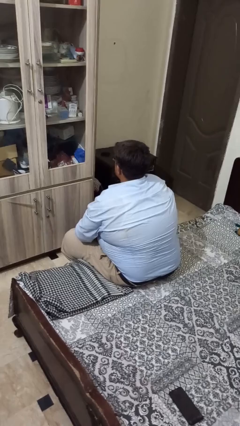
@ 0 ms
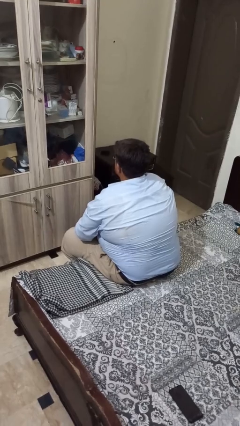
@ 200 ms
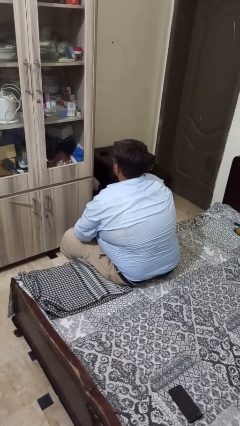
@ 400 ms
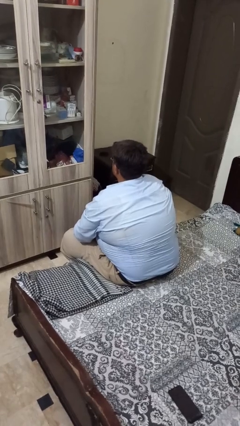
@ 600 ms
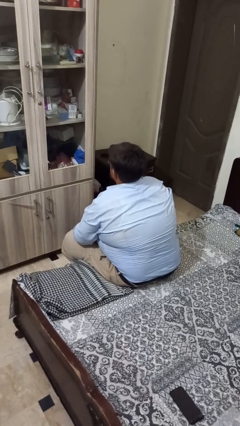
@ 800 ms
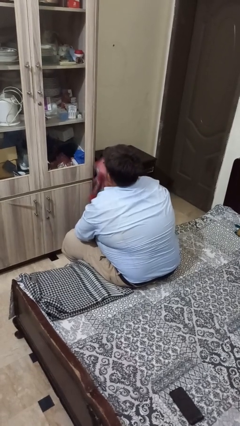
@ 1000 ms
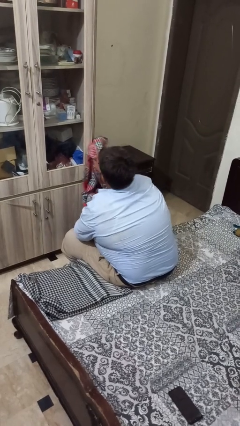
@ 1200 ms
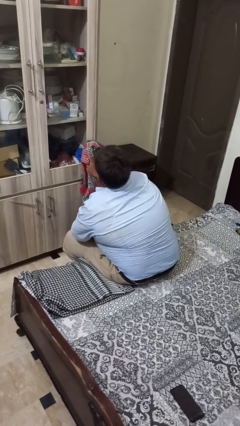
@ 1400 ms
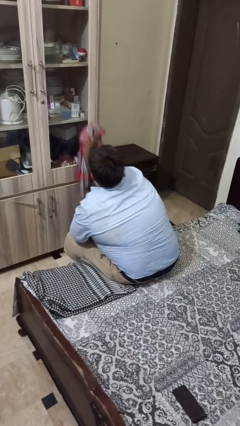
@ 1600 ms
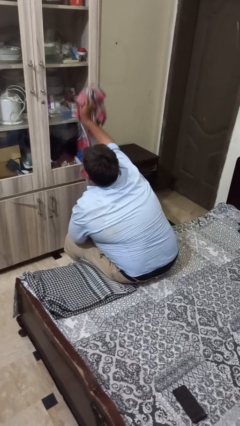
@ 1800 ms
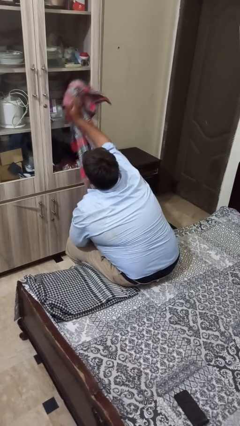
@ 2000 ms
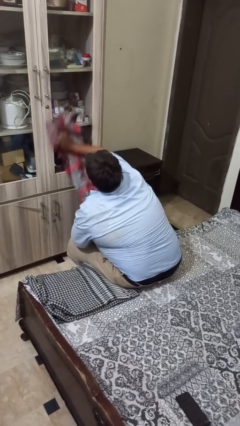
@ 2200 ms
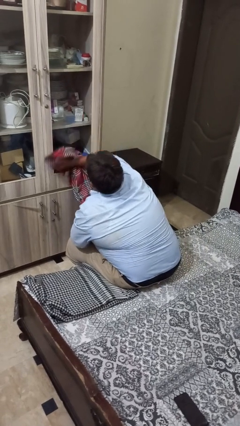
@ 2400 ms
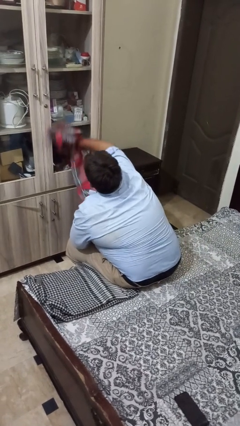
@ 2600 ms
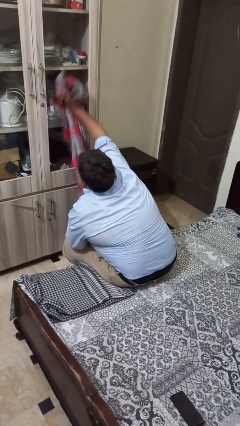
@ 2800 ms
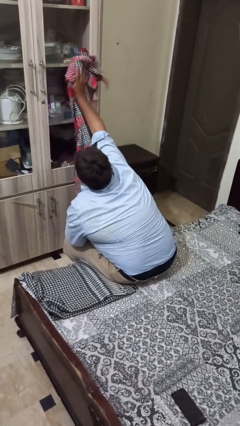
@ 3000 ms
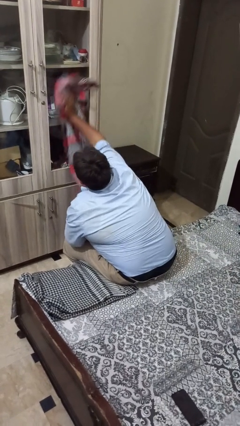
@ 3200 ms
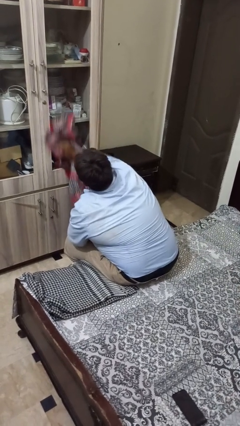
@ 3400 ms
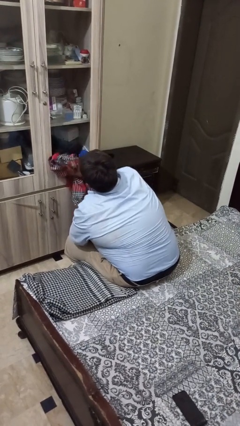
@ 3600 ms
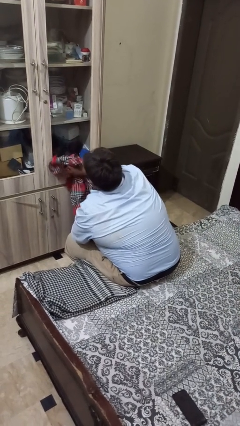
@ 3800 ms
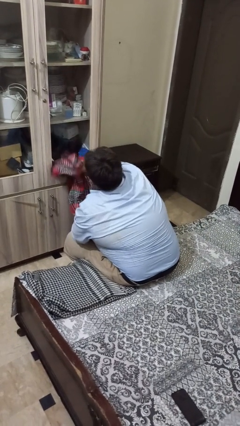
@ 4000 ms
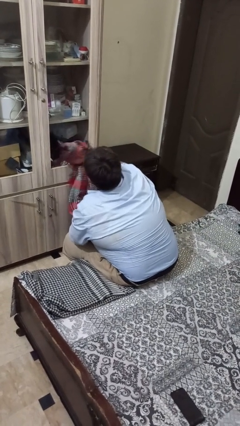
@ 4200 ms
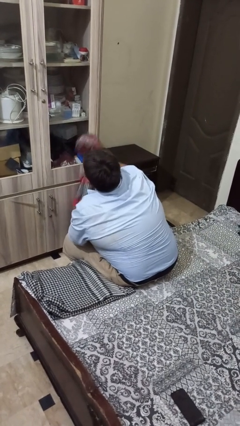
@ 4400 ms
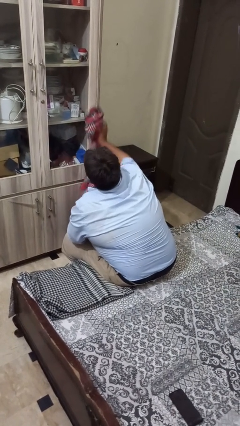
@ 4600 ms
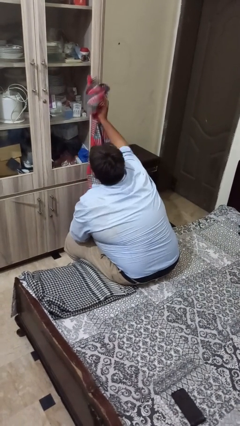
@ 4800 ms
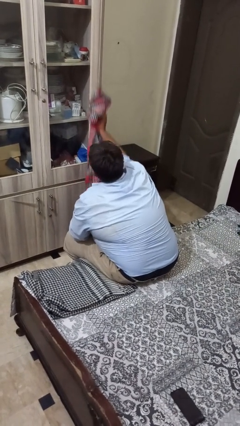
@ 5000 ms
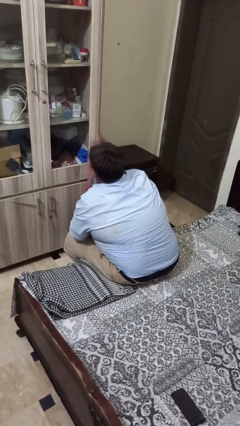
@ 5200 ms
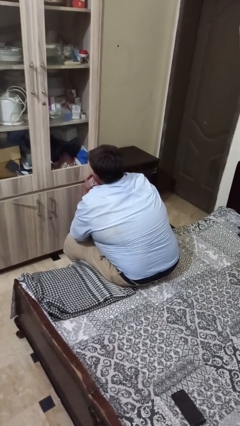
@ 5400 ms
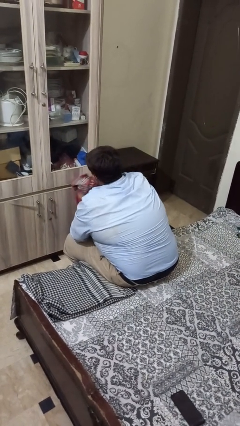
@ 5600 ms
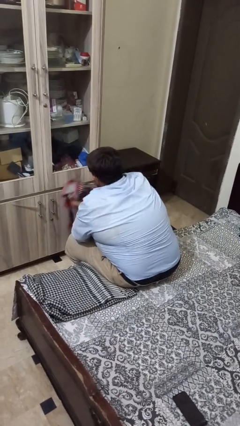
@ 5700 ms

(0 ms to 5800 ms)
person dusts furniture

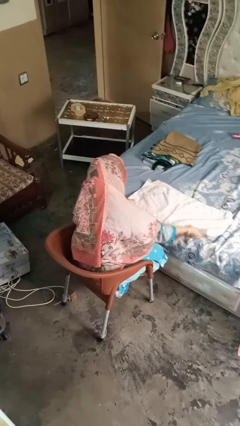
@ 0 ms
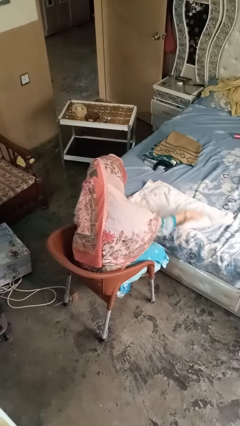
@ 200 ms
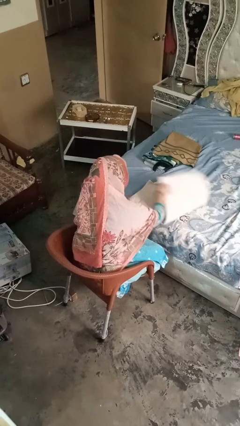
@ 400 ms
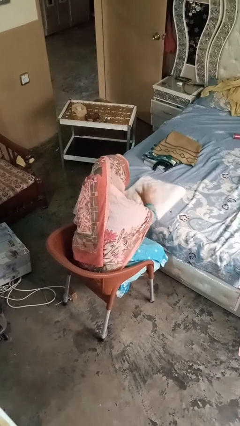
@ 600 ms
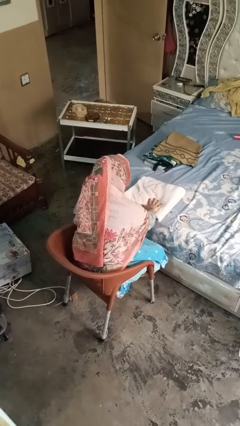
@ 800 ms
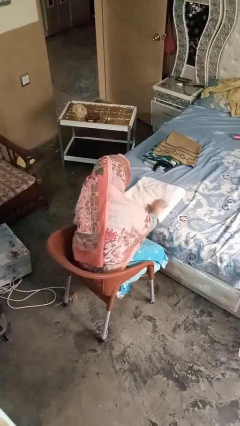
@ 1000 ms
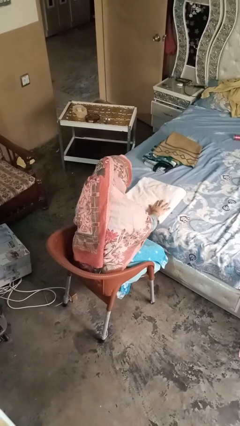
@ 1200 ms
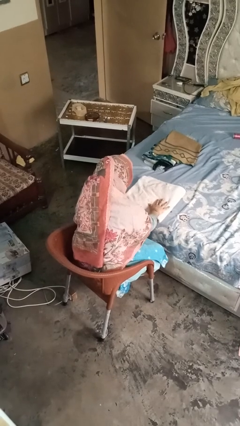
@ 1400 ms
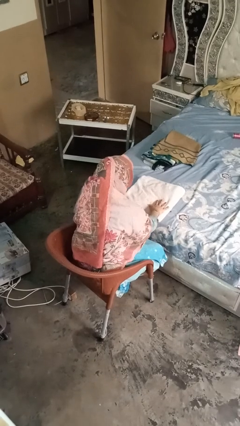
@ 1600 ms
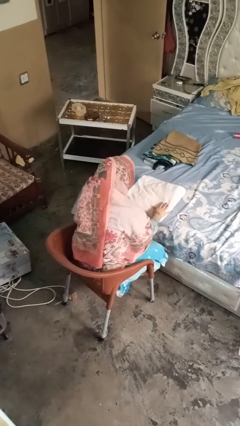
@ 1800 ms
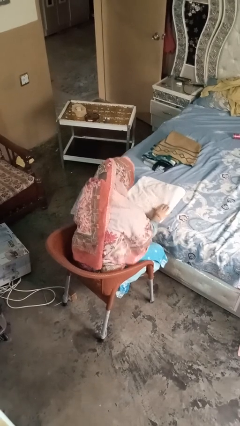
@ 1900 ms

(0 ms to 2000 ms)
person folds towel

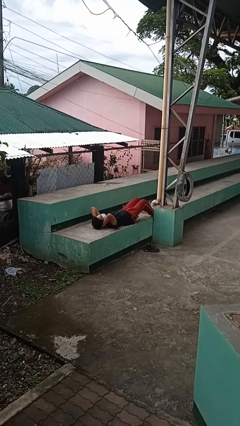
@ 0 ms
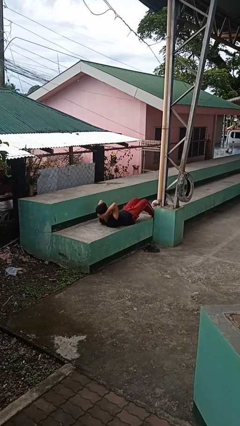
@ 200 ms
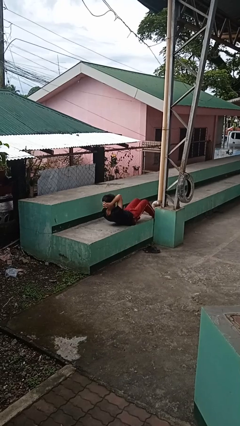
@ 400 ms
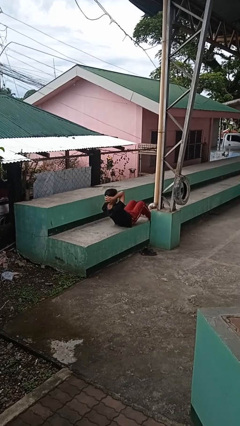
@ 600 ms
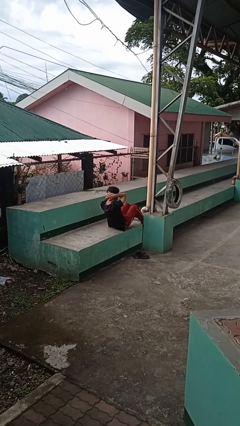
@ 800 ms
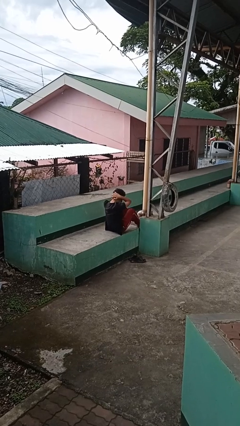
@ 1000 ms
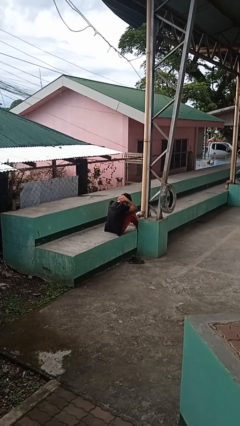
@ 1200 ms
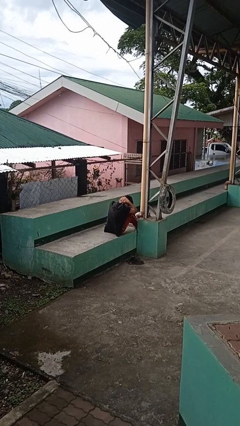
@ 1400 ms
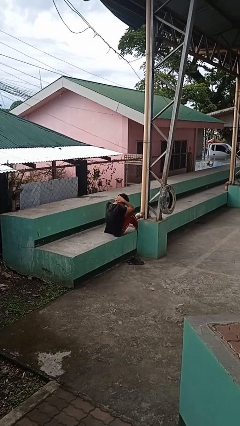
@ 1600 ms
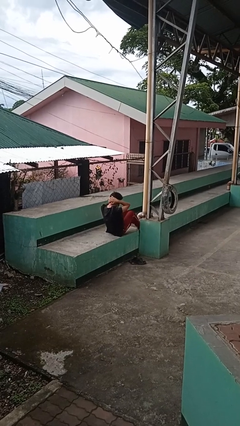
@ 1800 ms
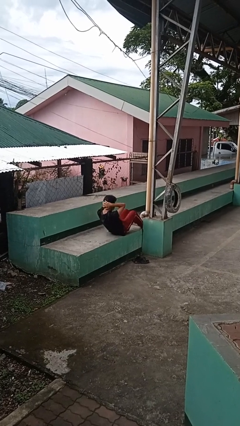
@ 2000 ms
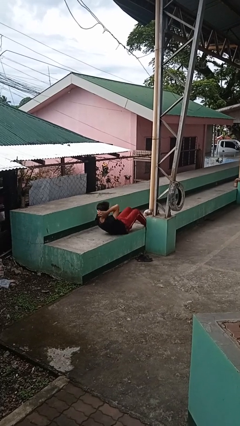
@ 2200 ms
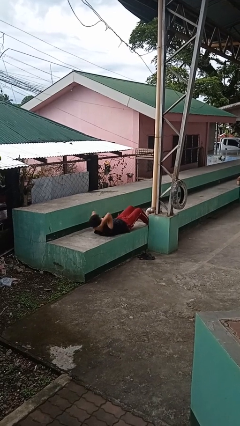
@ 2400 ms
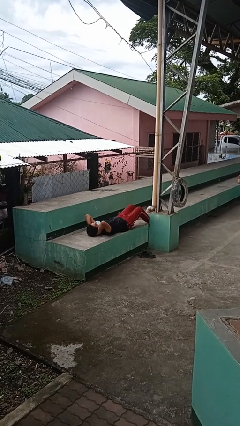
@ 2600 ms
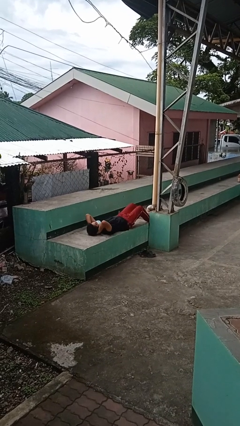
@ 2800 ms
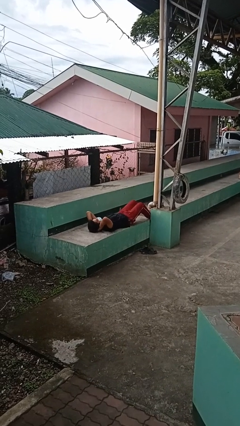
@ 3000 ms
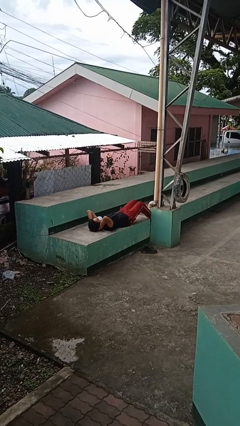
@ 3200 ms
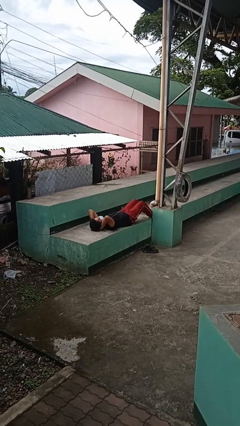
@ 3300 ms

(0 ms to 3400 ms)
person exercises with situp

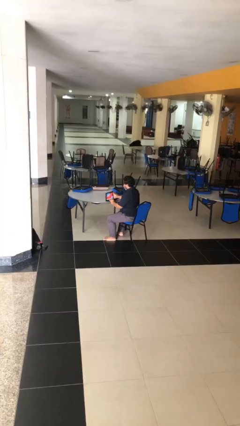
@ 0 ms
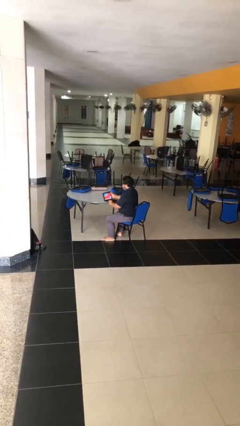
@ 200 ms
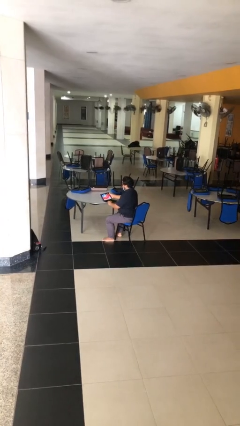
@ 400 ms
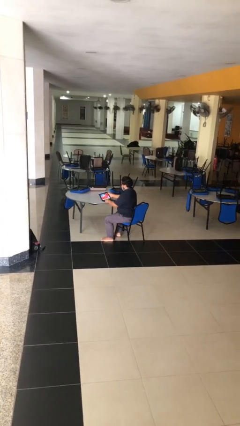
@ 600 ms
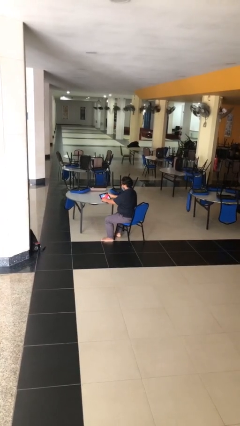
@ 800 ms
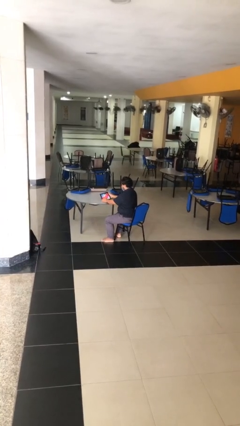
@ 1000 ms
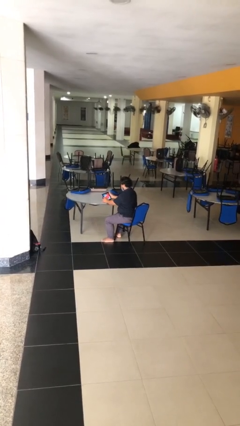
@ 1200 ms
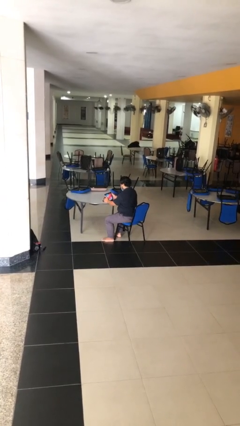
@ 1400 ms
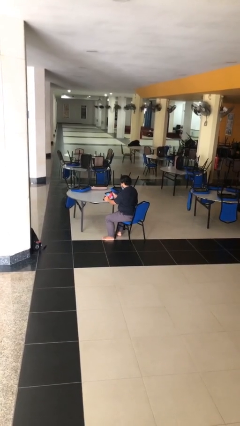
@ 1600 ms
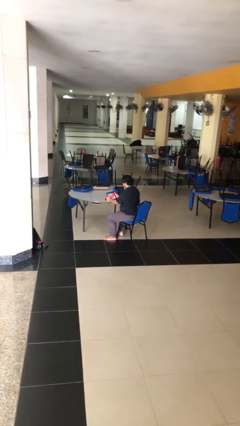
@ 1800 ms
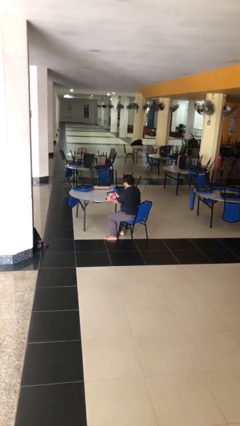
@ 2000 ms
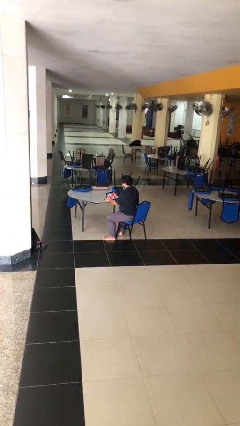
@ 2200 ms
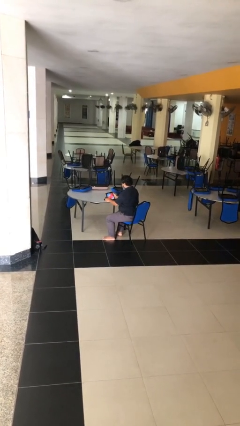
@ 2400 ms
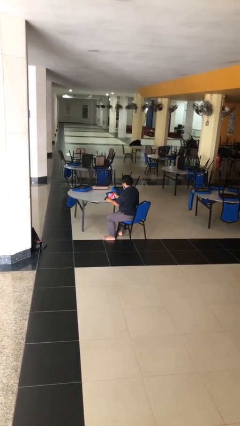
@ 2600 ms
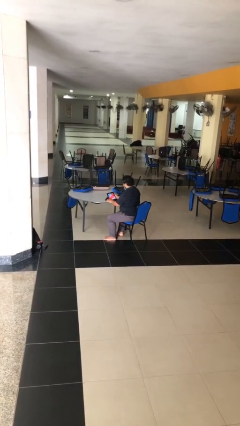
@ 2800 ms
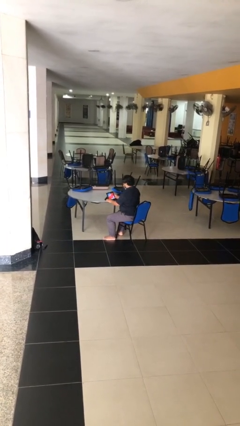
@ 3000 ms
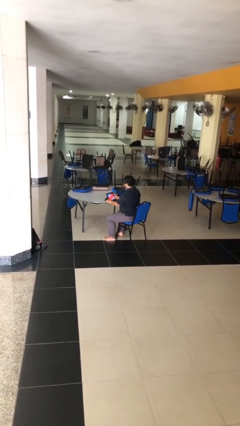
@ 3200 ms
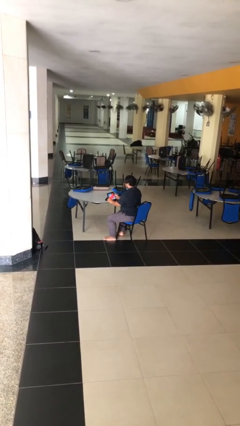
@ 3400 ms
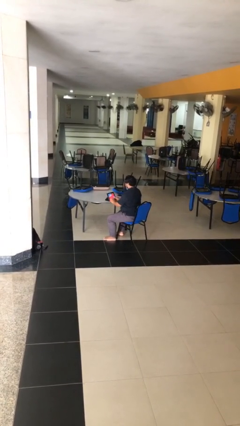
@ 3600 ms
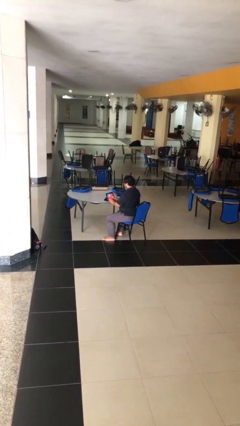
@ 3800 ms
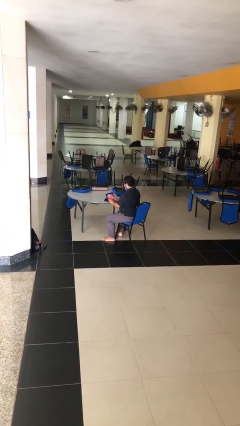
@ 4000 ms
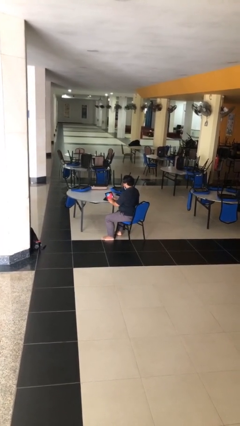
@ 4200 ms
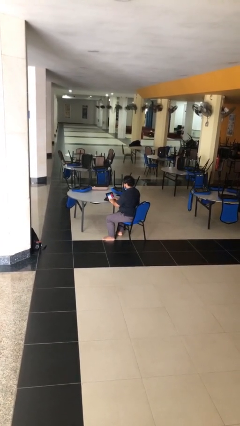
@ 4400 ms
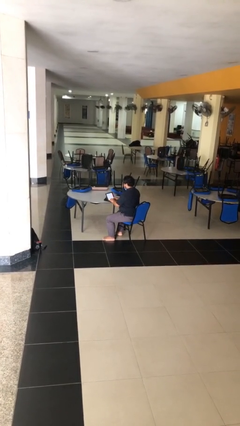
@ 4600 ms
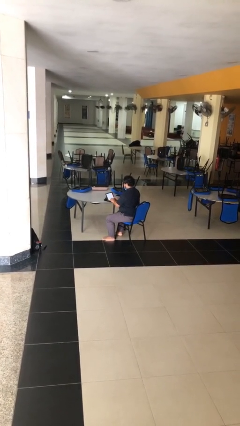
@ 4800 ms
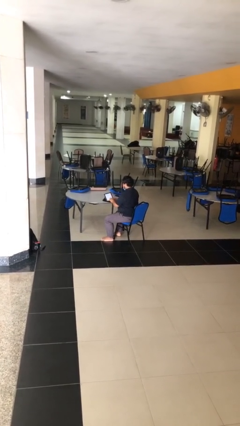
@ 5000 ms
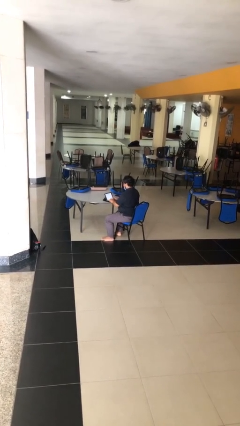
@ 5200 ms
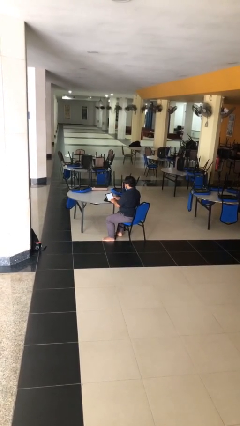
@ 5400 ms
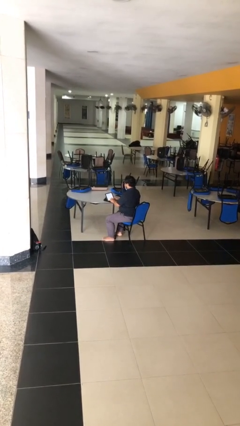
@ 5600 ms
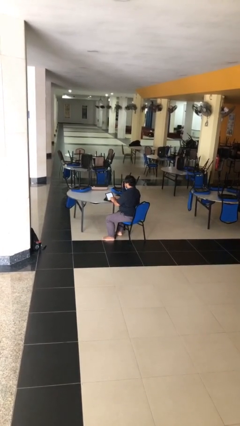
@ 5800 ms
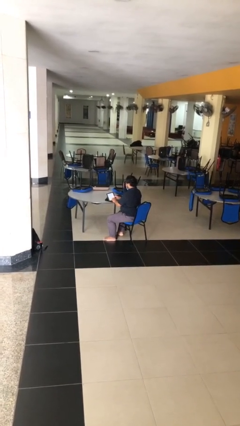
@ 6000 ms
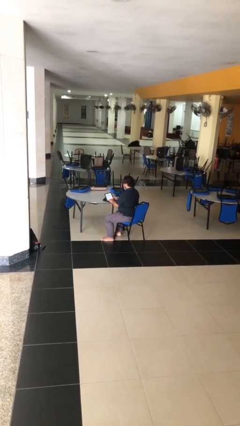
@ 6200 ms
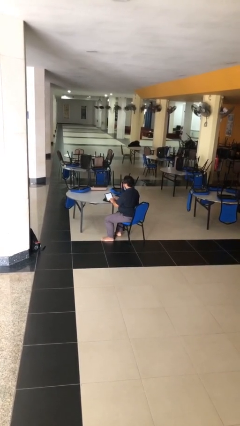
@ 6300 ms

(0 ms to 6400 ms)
person interacts with laptop
